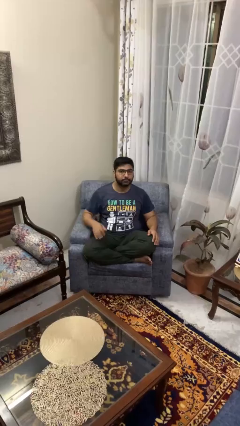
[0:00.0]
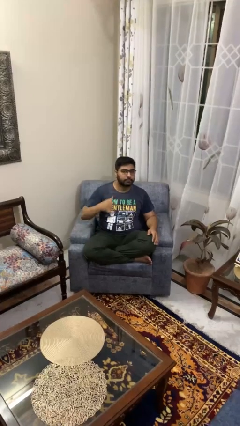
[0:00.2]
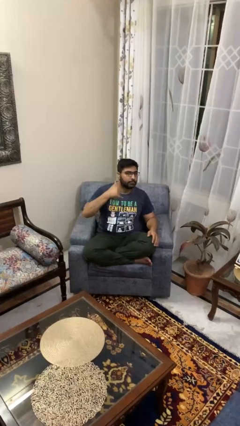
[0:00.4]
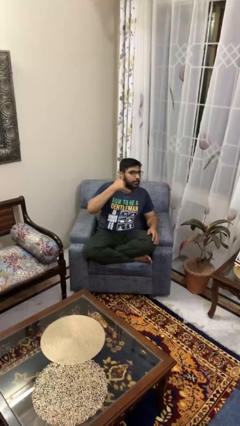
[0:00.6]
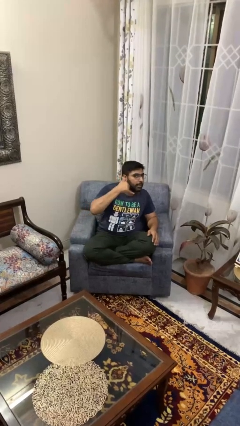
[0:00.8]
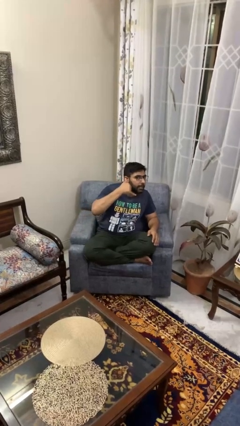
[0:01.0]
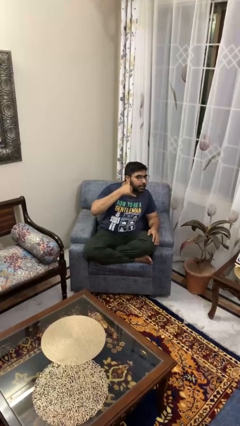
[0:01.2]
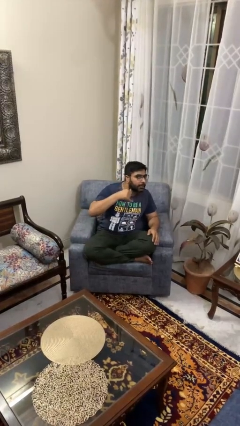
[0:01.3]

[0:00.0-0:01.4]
person gestures call me

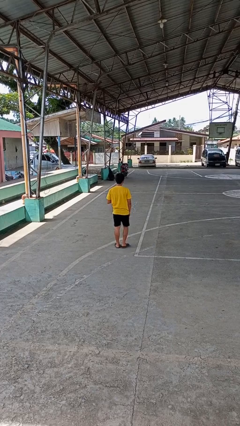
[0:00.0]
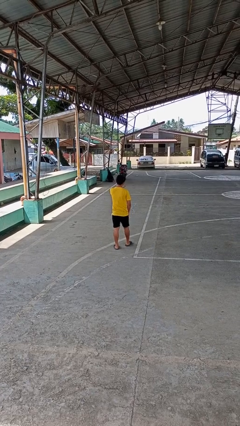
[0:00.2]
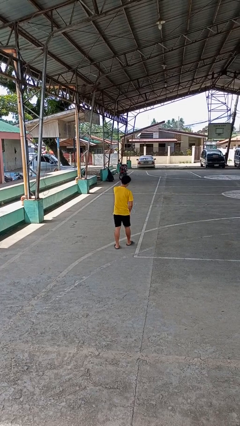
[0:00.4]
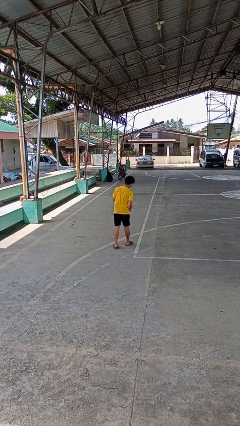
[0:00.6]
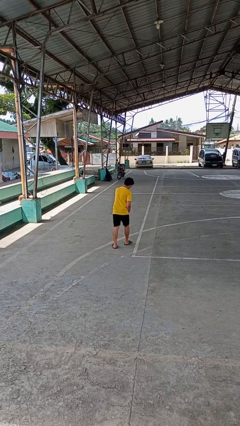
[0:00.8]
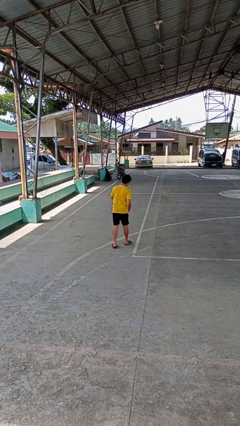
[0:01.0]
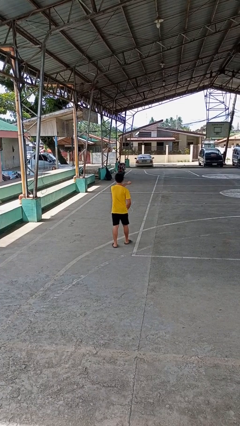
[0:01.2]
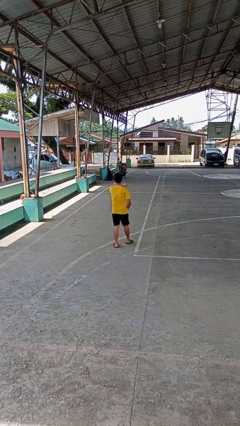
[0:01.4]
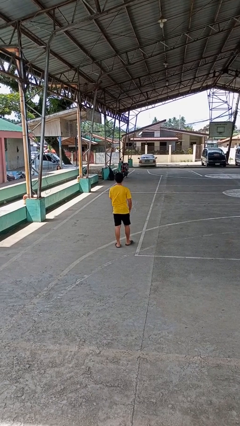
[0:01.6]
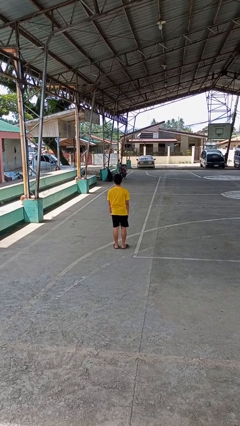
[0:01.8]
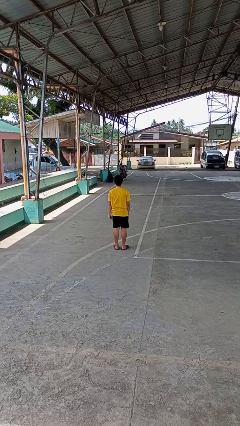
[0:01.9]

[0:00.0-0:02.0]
person punches

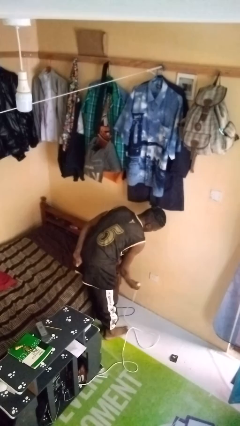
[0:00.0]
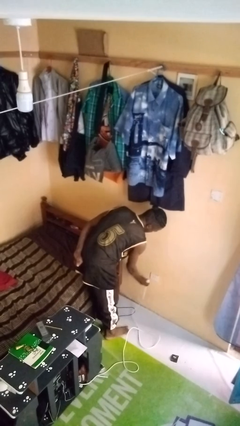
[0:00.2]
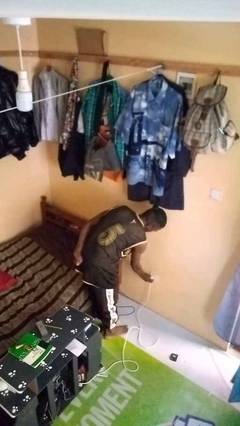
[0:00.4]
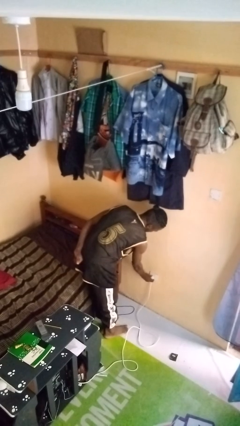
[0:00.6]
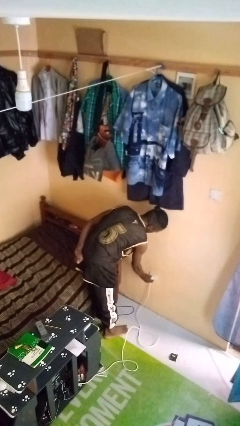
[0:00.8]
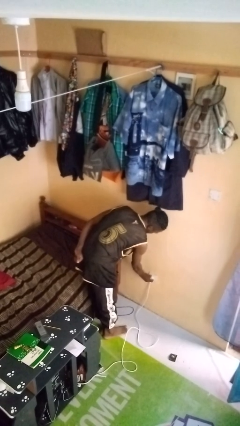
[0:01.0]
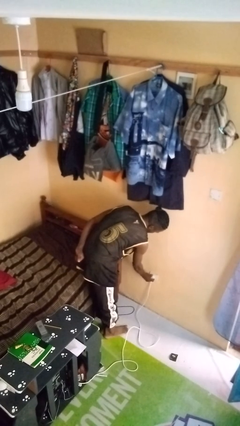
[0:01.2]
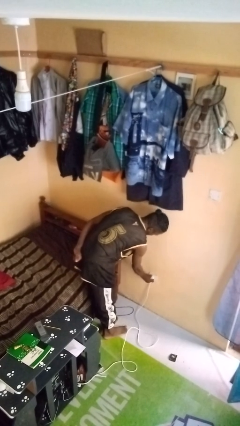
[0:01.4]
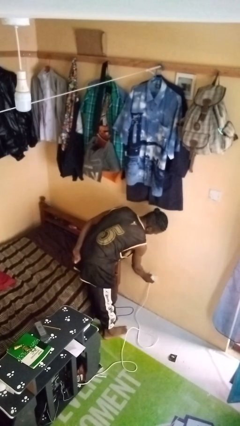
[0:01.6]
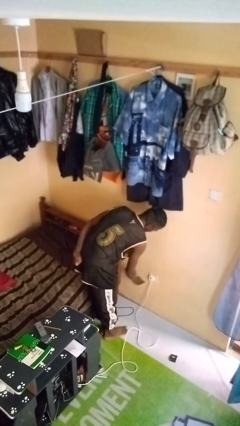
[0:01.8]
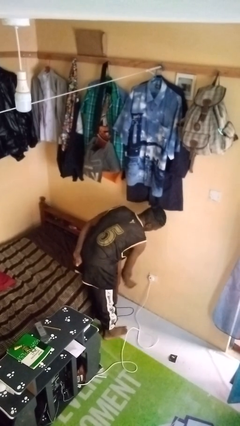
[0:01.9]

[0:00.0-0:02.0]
person plugs into electrical socket

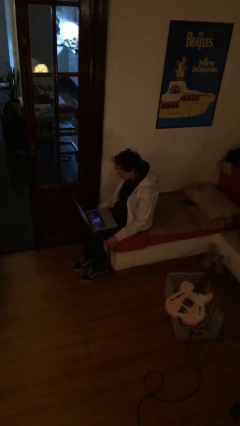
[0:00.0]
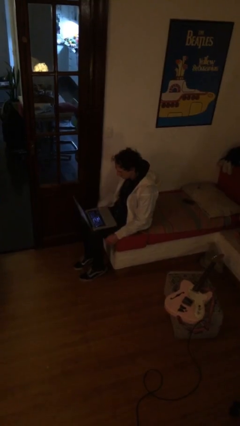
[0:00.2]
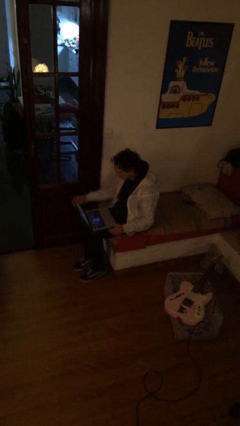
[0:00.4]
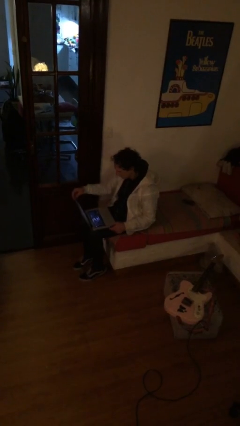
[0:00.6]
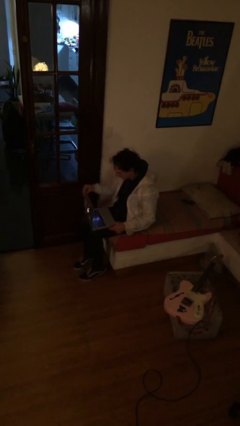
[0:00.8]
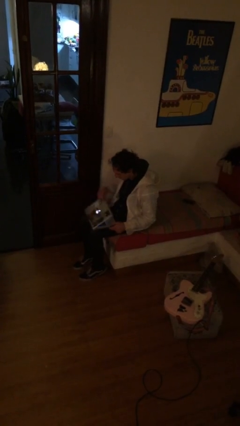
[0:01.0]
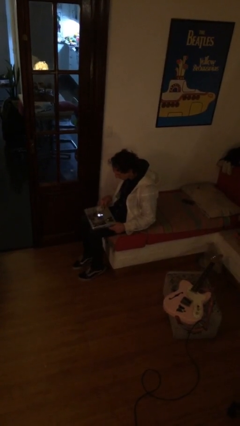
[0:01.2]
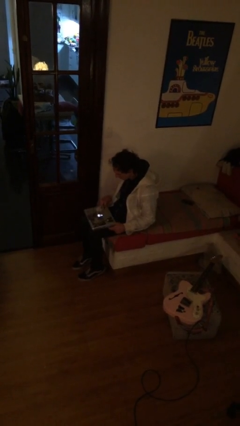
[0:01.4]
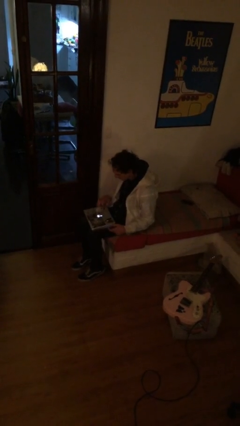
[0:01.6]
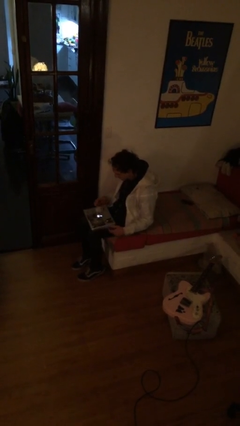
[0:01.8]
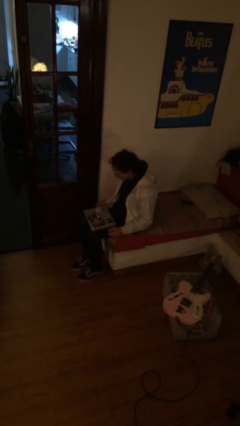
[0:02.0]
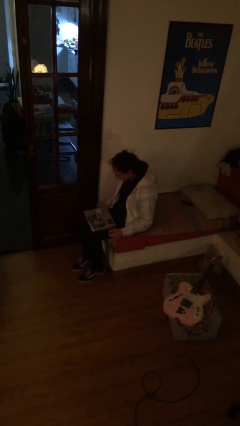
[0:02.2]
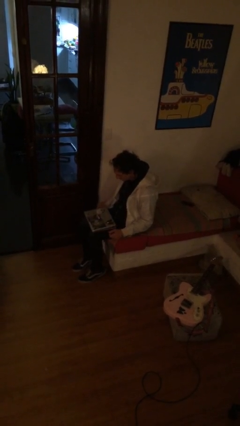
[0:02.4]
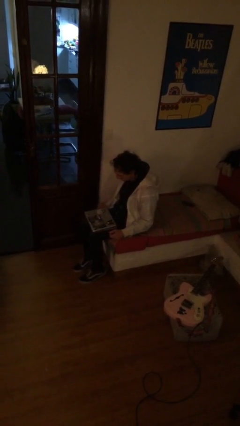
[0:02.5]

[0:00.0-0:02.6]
person closes laptop

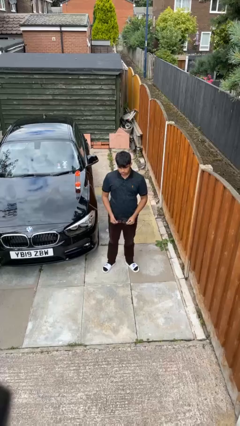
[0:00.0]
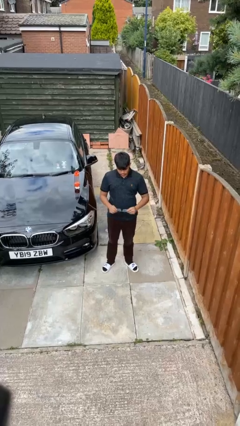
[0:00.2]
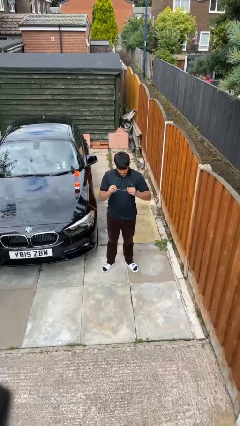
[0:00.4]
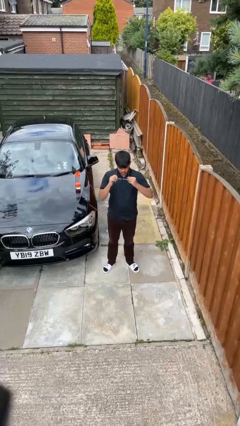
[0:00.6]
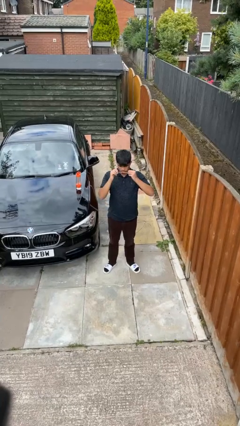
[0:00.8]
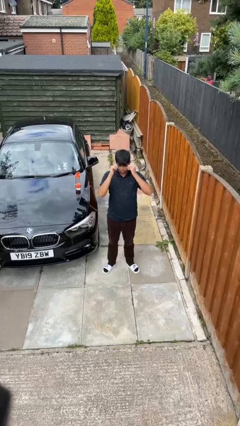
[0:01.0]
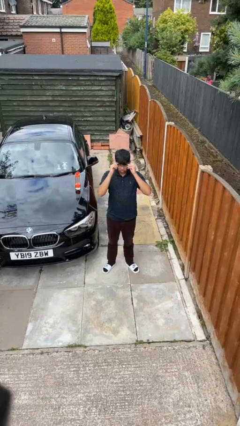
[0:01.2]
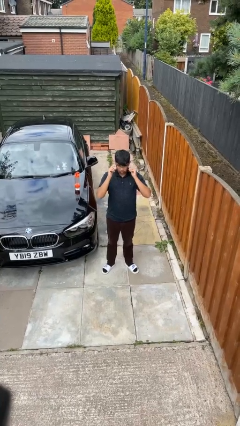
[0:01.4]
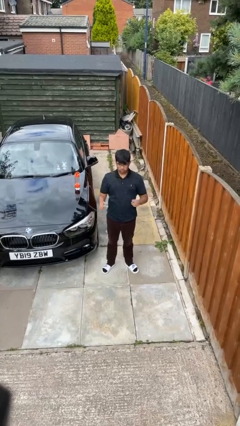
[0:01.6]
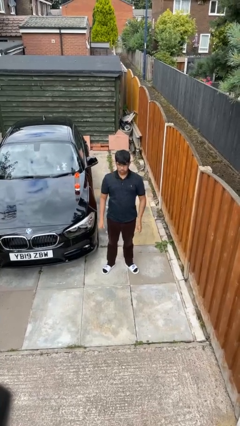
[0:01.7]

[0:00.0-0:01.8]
person puts on glasses

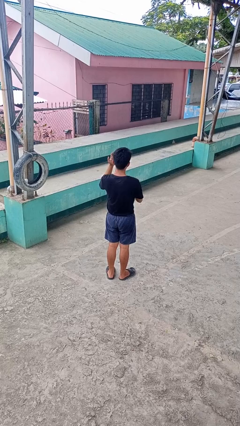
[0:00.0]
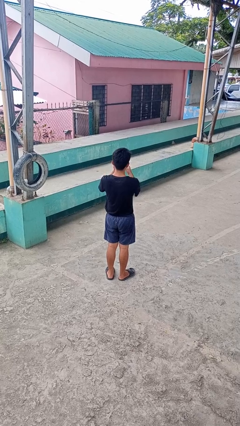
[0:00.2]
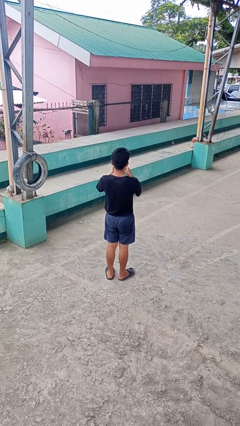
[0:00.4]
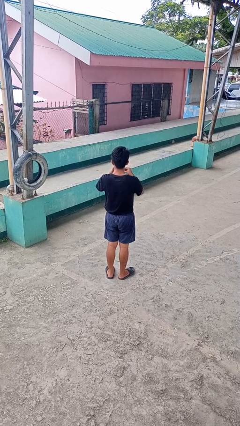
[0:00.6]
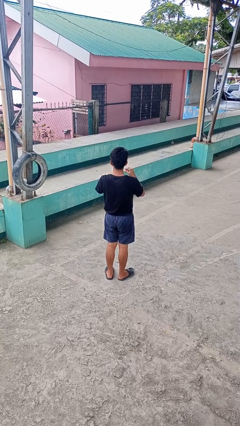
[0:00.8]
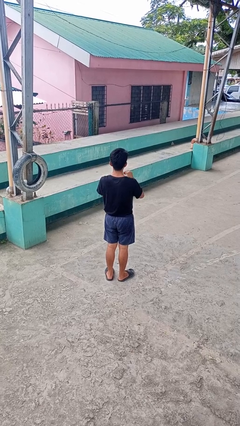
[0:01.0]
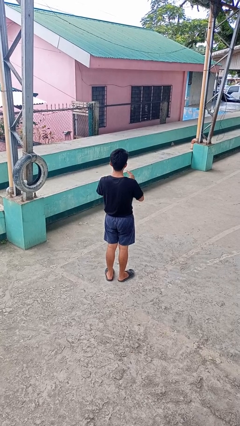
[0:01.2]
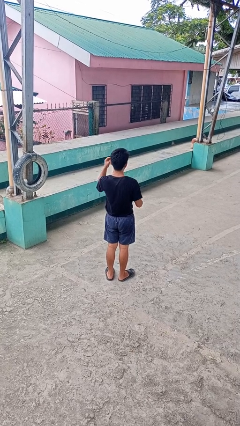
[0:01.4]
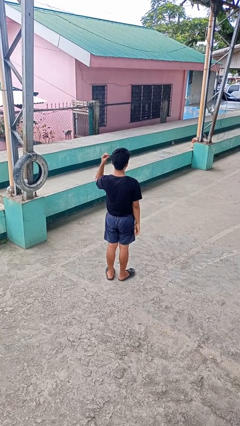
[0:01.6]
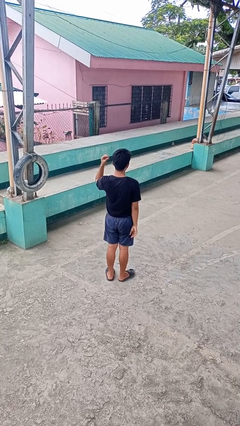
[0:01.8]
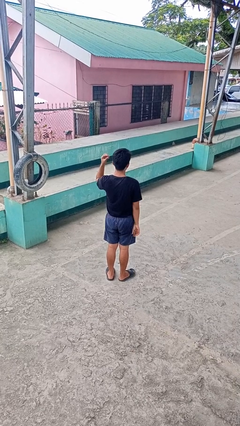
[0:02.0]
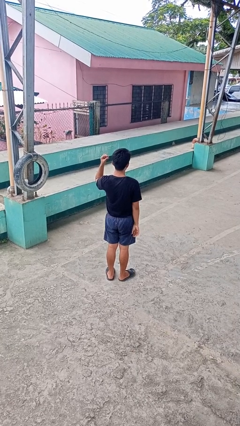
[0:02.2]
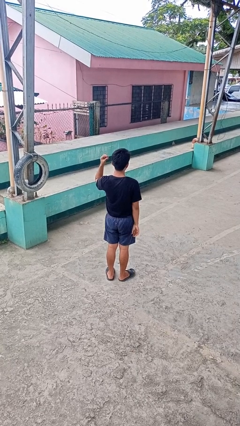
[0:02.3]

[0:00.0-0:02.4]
person takes off ring

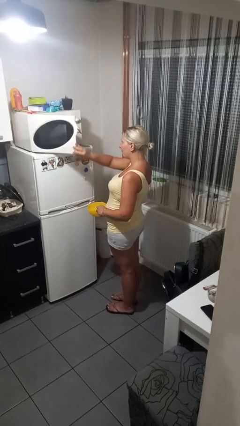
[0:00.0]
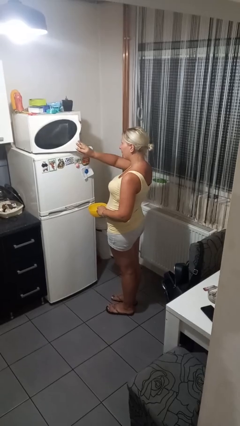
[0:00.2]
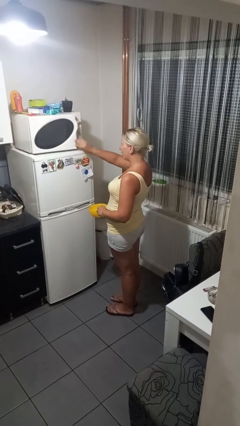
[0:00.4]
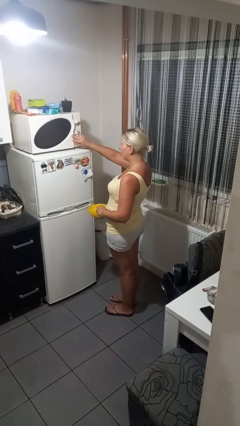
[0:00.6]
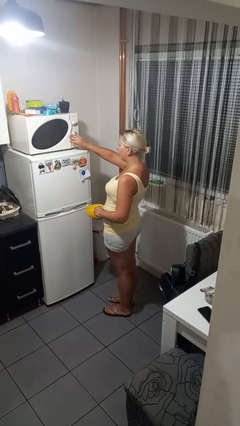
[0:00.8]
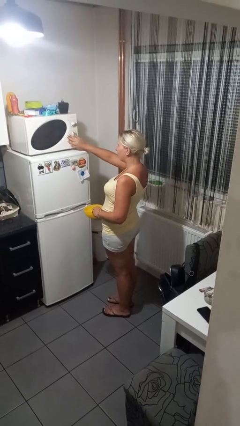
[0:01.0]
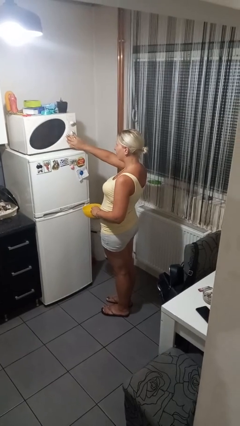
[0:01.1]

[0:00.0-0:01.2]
person closes microwave

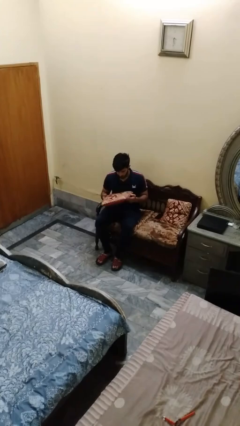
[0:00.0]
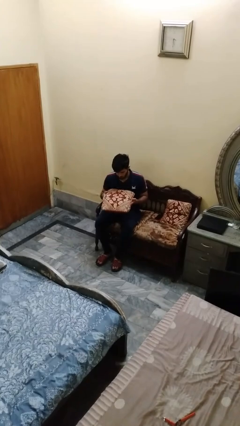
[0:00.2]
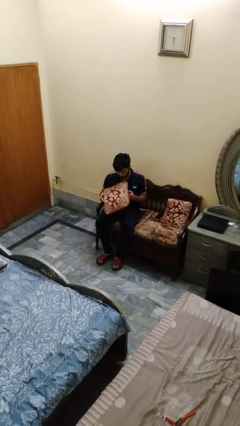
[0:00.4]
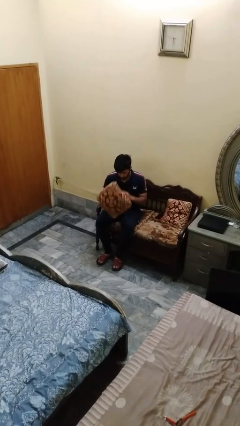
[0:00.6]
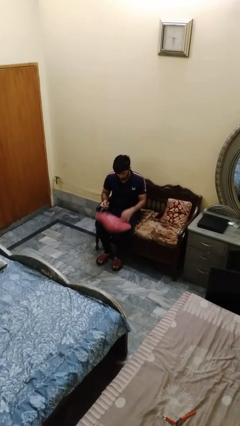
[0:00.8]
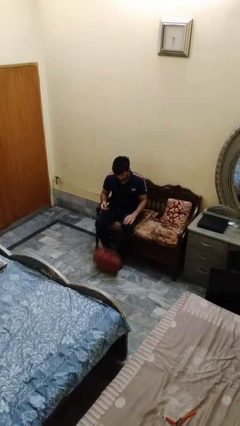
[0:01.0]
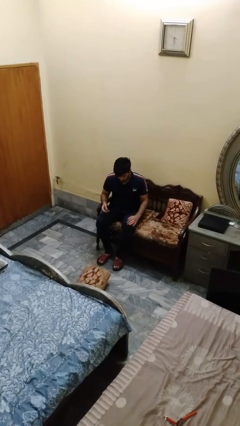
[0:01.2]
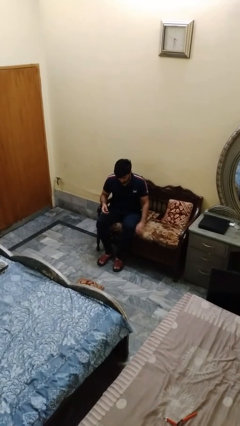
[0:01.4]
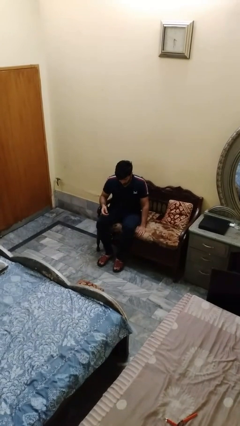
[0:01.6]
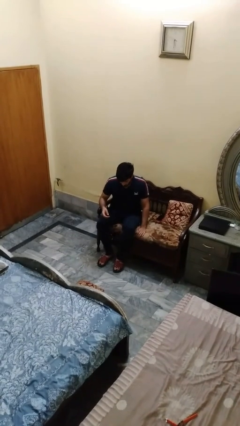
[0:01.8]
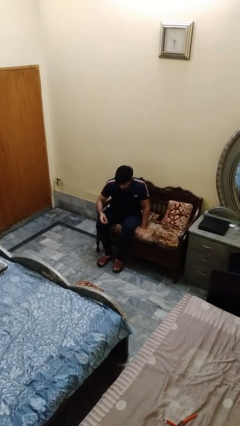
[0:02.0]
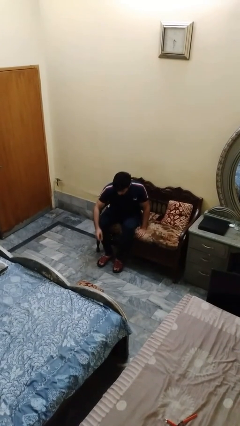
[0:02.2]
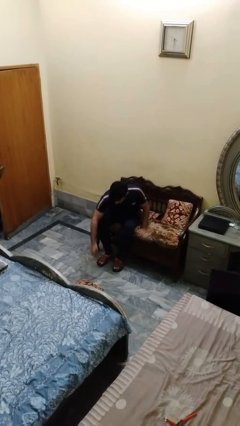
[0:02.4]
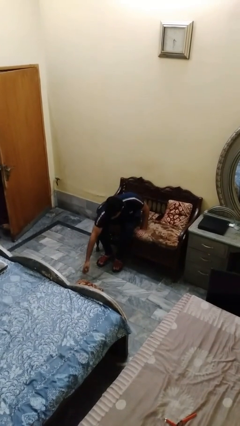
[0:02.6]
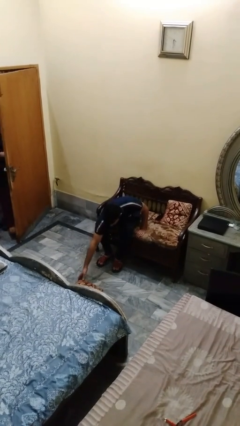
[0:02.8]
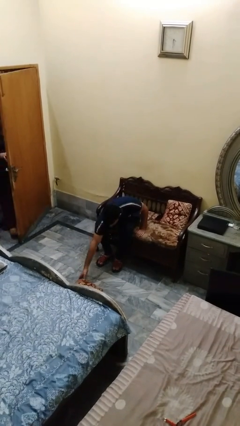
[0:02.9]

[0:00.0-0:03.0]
person drops object
